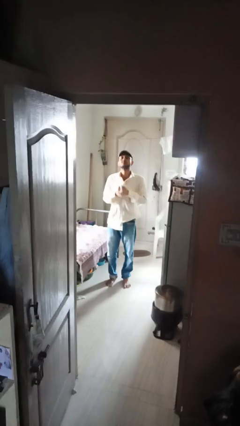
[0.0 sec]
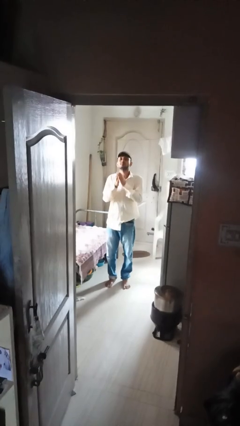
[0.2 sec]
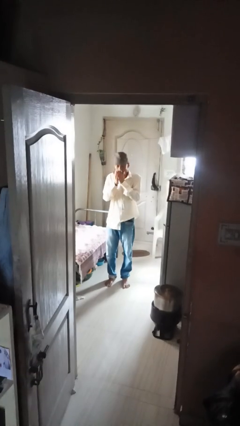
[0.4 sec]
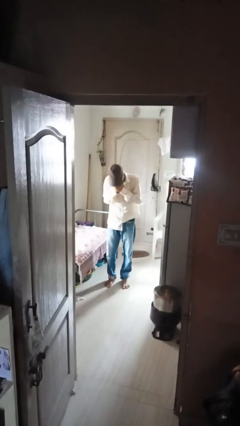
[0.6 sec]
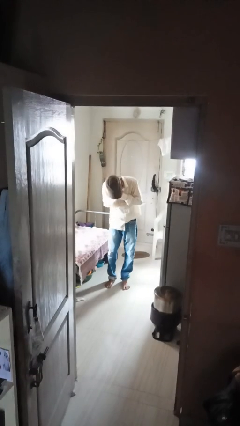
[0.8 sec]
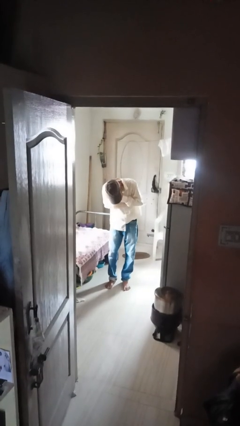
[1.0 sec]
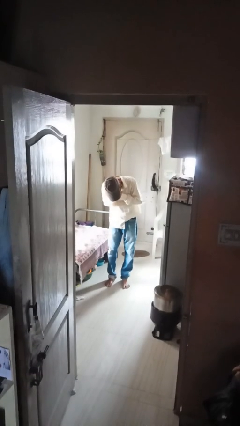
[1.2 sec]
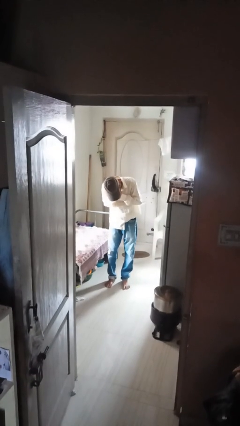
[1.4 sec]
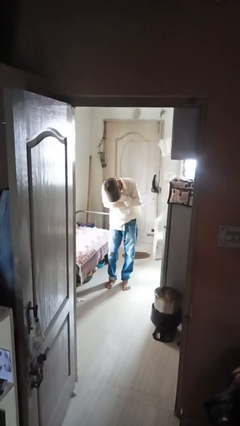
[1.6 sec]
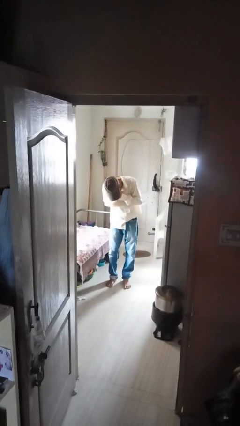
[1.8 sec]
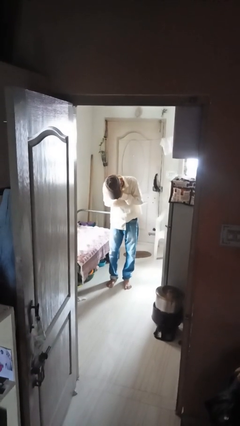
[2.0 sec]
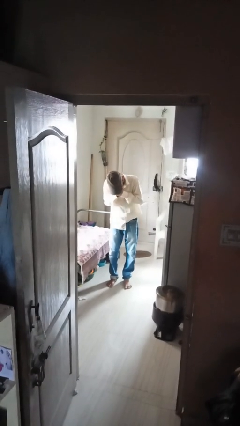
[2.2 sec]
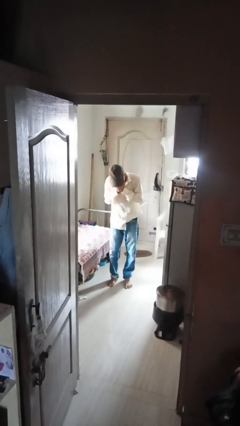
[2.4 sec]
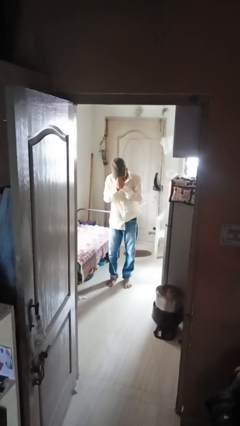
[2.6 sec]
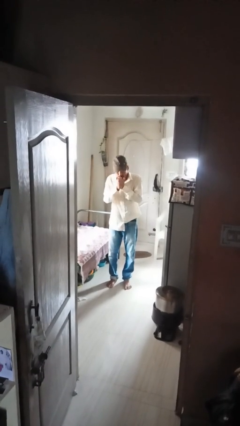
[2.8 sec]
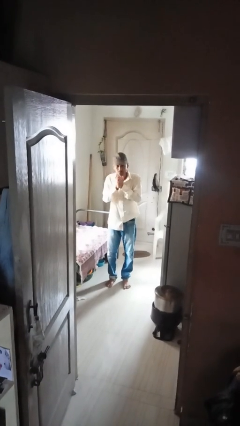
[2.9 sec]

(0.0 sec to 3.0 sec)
person sneezes into hand

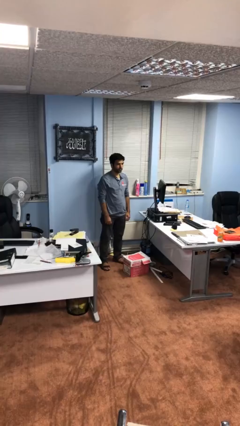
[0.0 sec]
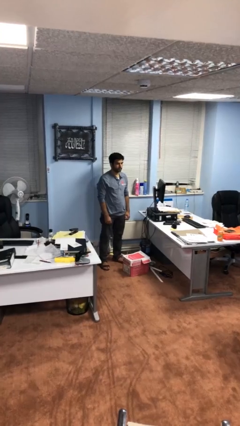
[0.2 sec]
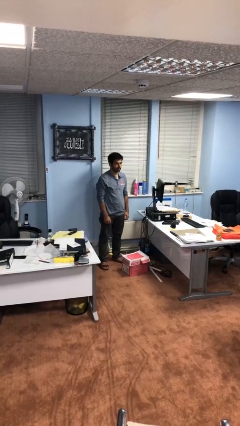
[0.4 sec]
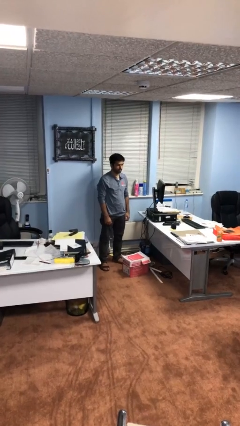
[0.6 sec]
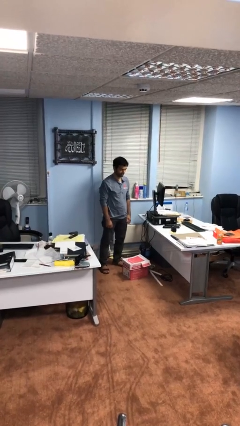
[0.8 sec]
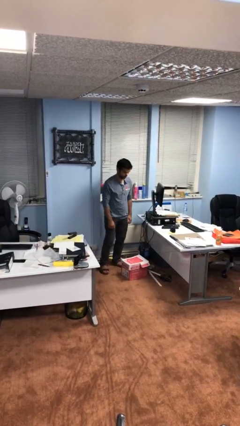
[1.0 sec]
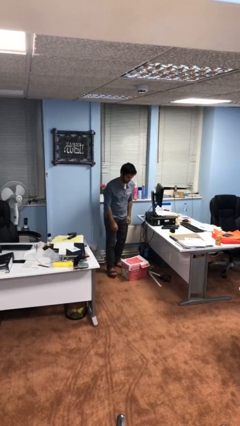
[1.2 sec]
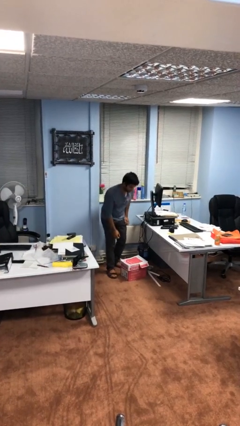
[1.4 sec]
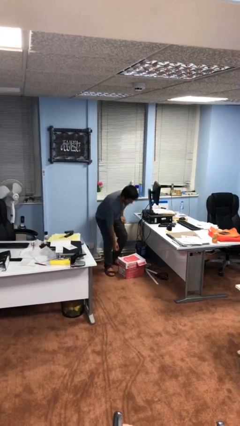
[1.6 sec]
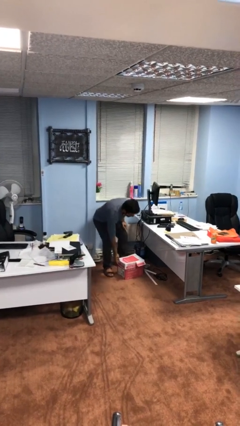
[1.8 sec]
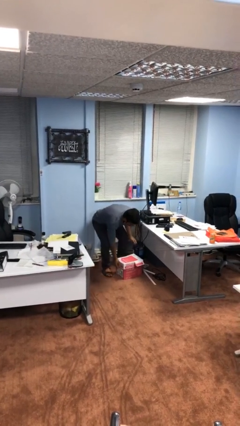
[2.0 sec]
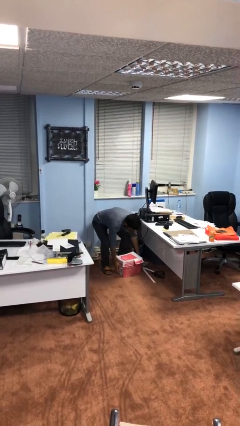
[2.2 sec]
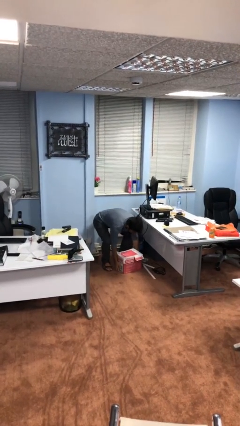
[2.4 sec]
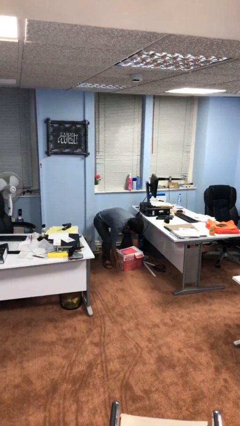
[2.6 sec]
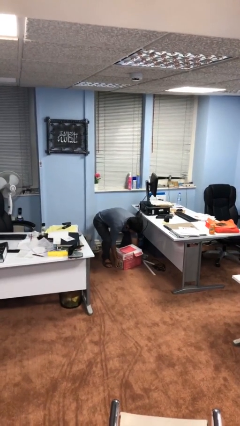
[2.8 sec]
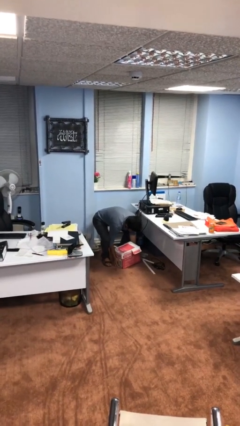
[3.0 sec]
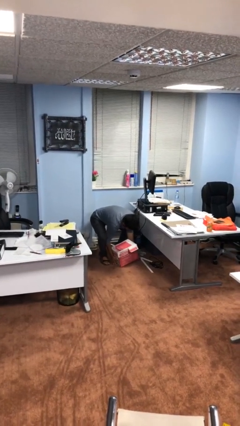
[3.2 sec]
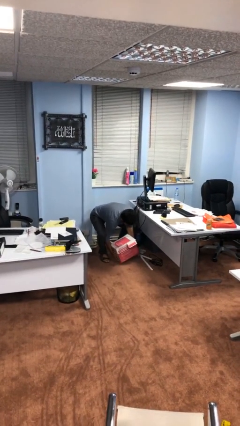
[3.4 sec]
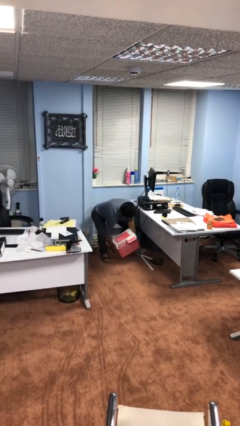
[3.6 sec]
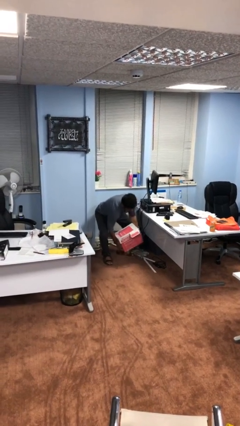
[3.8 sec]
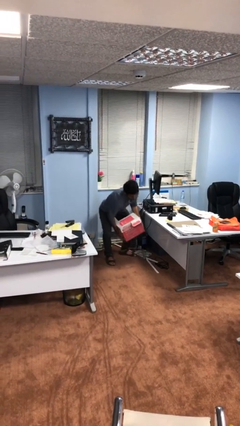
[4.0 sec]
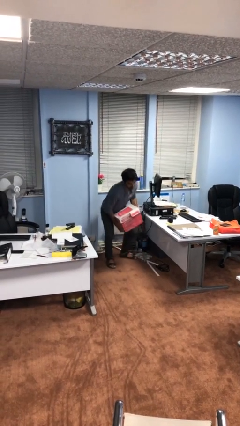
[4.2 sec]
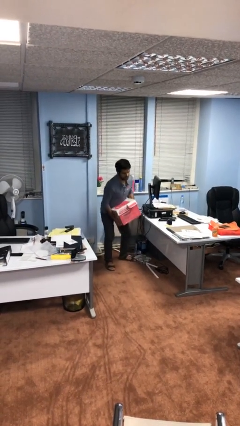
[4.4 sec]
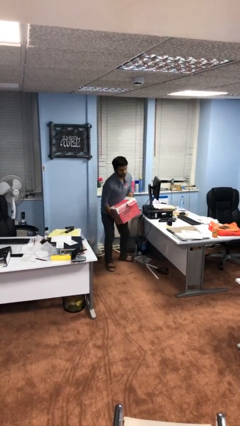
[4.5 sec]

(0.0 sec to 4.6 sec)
person picks up object from floor

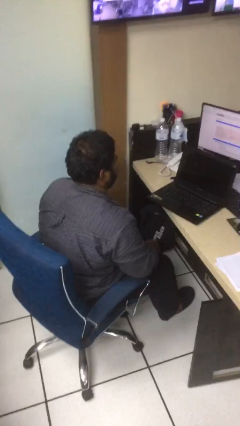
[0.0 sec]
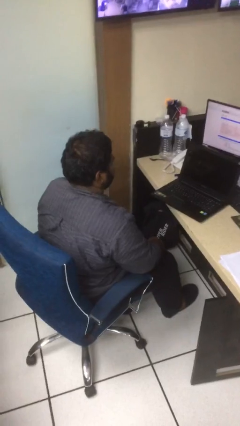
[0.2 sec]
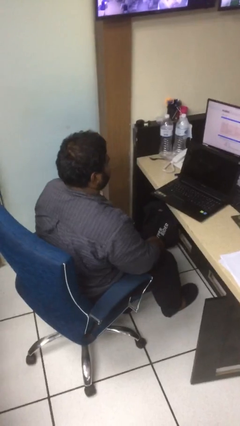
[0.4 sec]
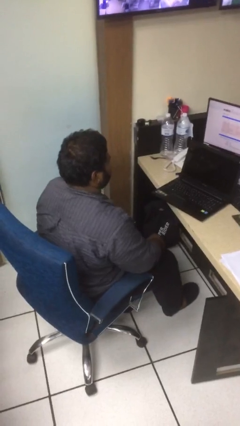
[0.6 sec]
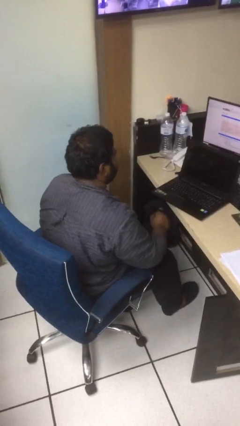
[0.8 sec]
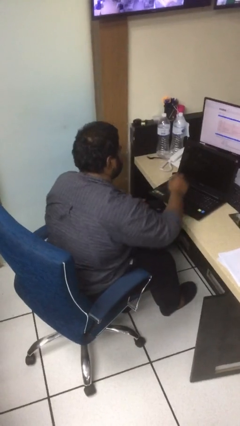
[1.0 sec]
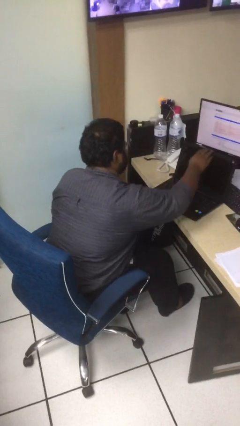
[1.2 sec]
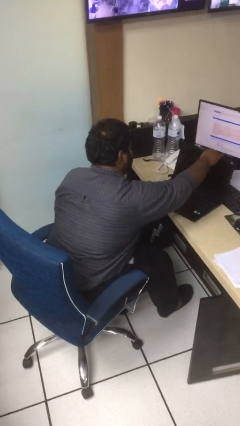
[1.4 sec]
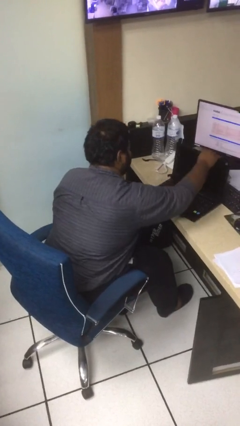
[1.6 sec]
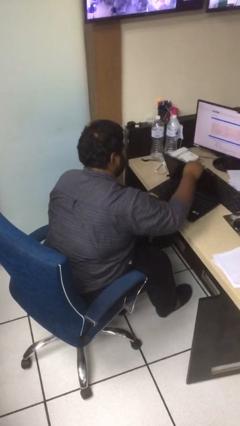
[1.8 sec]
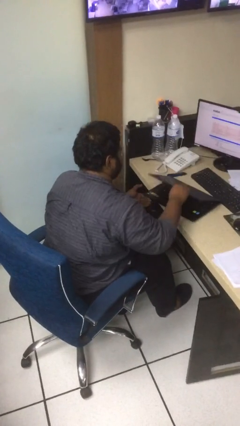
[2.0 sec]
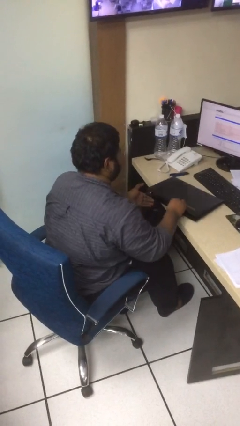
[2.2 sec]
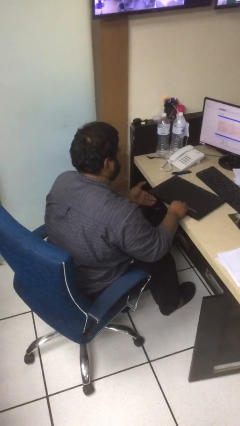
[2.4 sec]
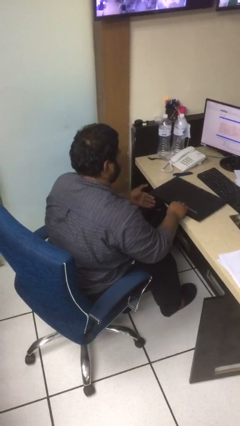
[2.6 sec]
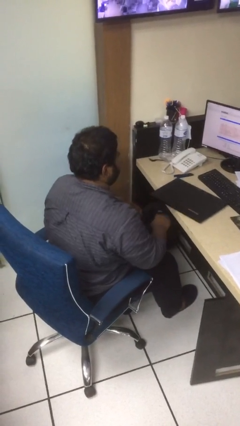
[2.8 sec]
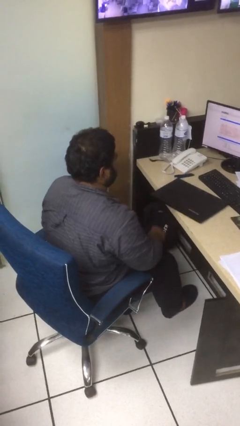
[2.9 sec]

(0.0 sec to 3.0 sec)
person closes laptop

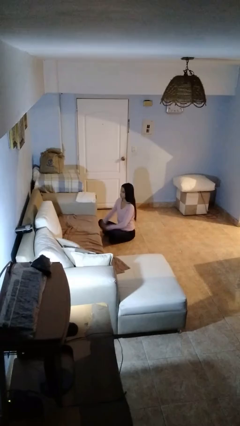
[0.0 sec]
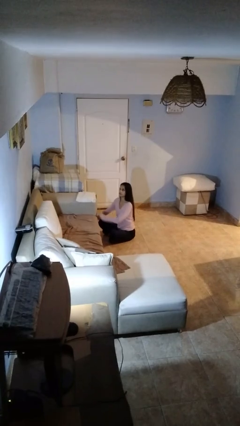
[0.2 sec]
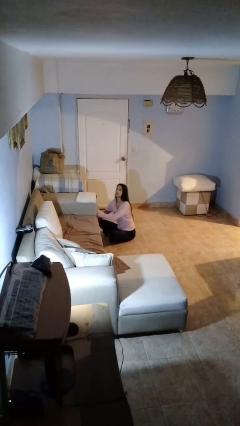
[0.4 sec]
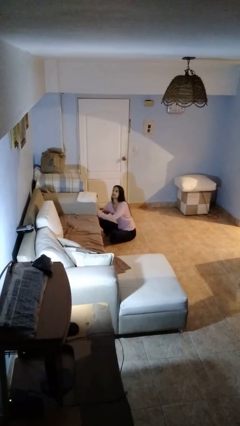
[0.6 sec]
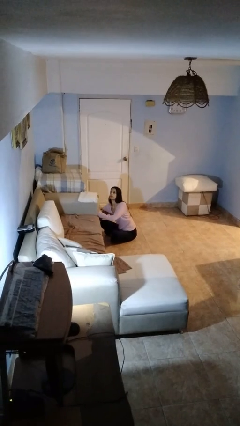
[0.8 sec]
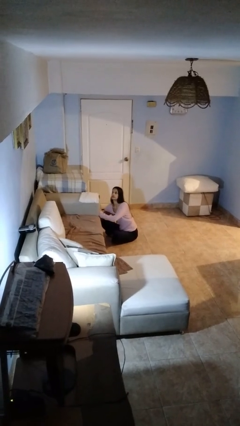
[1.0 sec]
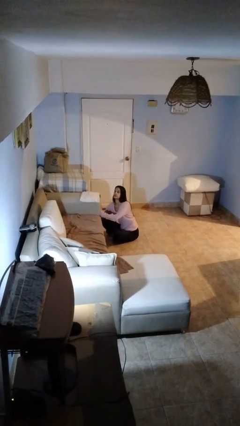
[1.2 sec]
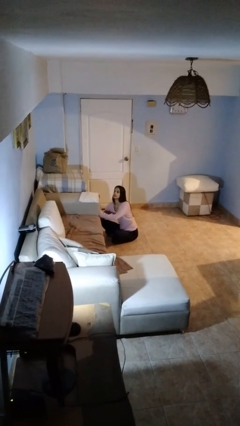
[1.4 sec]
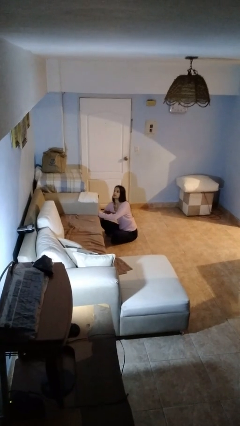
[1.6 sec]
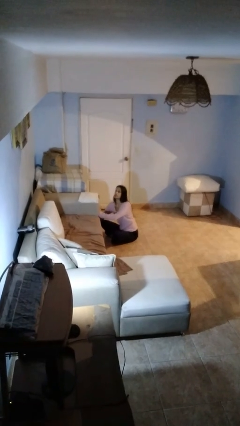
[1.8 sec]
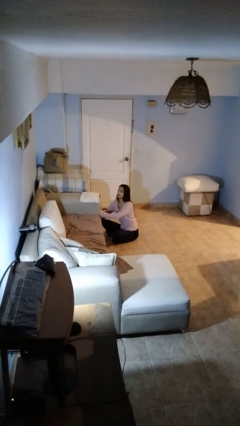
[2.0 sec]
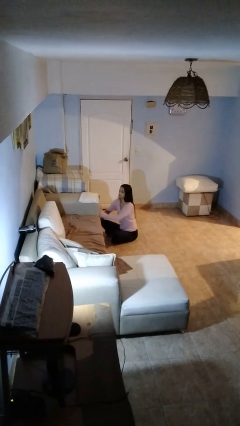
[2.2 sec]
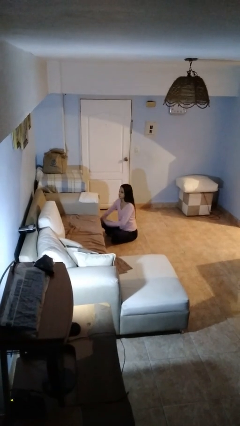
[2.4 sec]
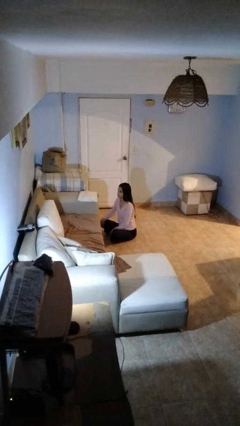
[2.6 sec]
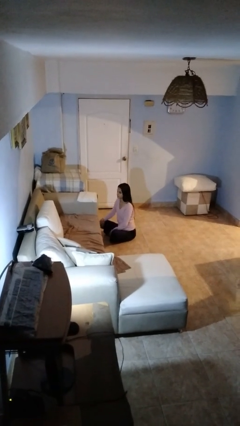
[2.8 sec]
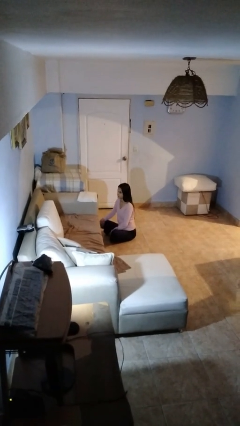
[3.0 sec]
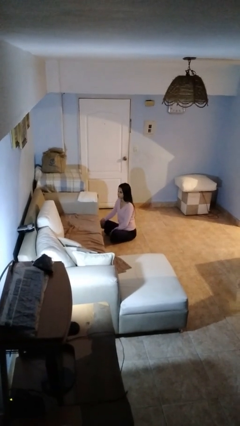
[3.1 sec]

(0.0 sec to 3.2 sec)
person searches under couch

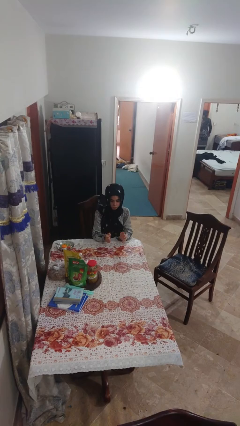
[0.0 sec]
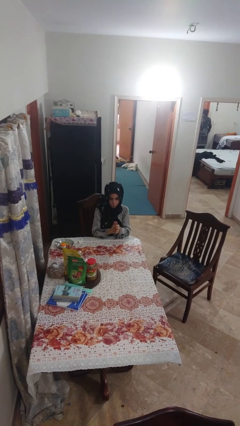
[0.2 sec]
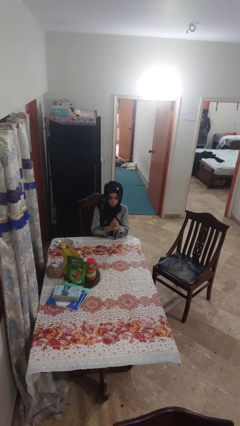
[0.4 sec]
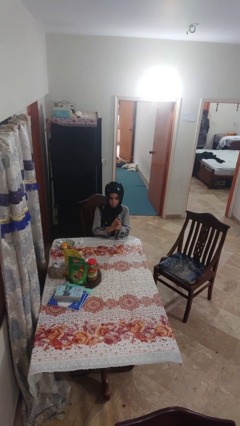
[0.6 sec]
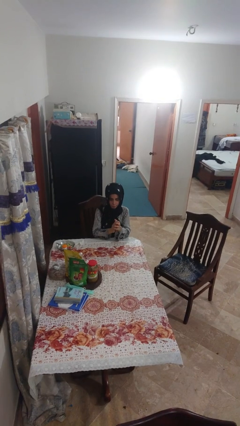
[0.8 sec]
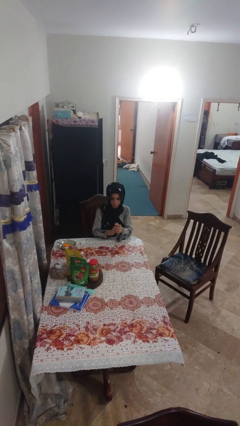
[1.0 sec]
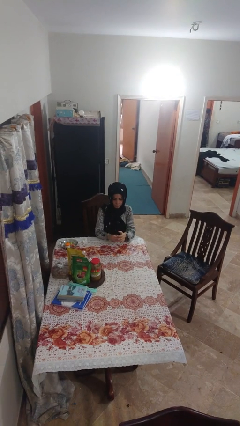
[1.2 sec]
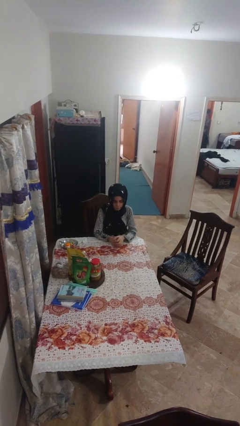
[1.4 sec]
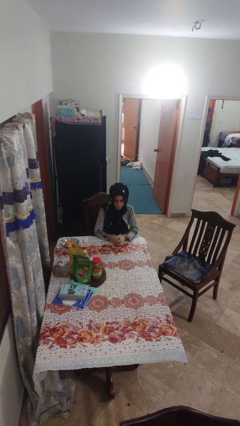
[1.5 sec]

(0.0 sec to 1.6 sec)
person claps hands

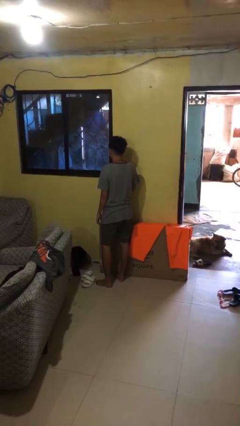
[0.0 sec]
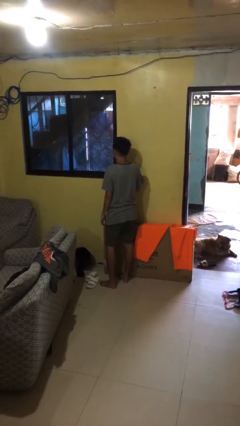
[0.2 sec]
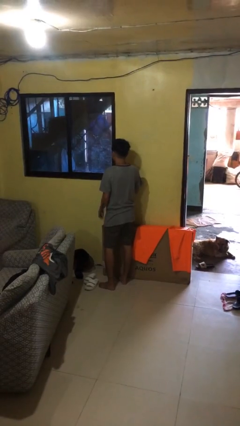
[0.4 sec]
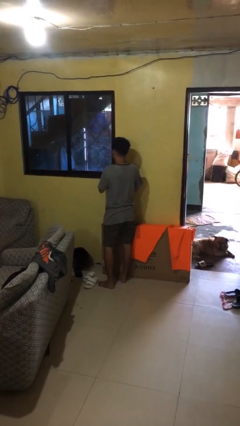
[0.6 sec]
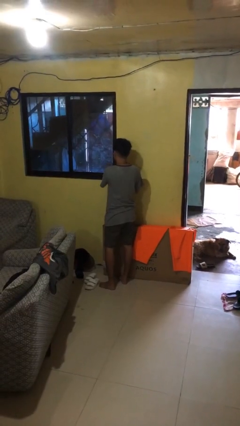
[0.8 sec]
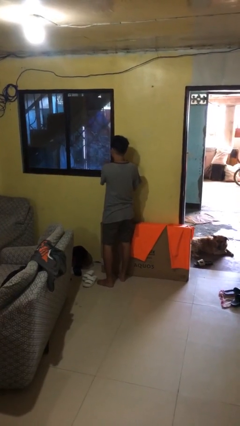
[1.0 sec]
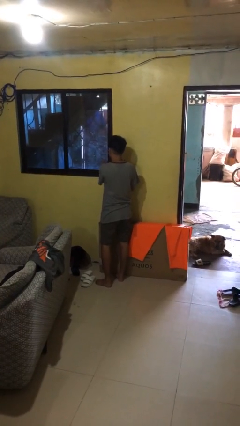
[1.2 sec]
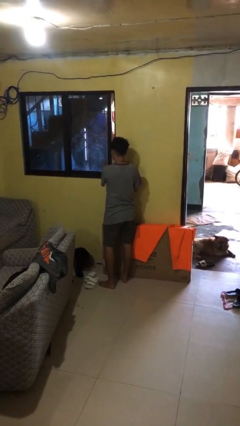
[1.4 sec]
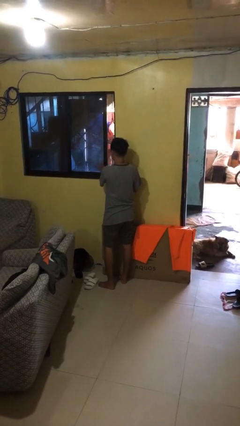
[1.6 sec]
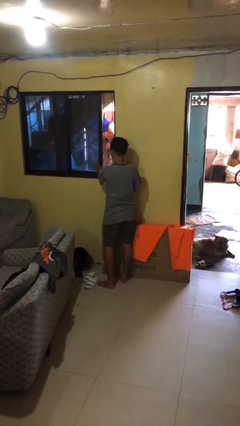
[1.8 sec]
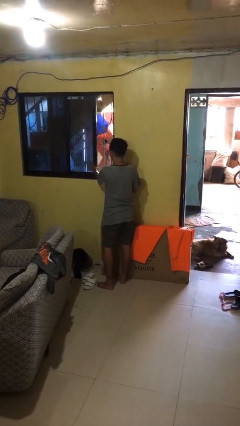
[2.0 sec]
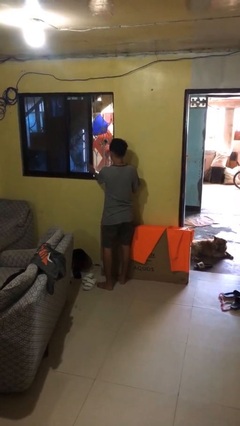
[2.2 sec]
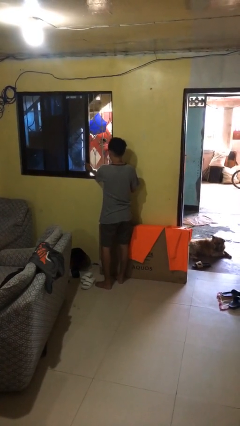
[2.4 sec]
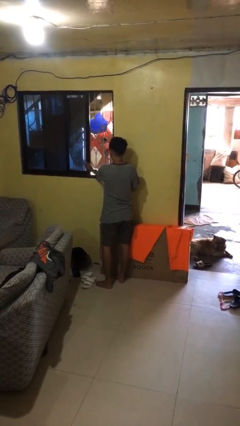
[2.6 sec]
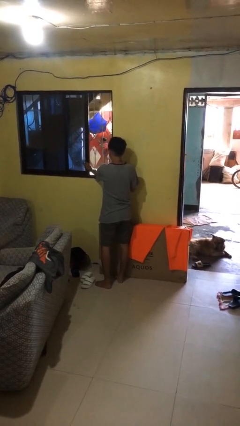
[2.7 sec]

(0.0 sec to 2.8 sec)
person opens home window
